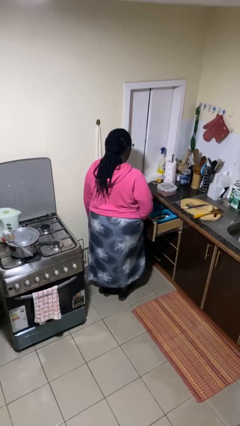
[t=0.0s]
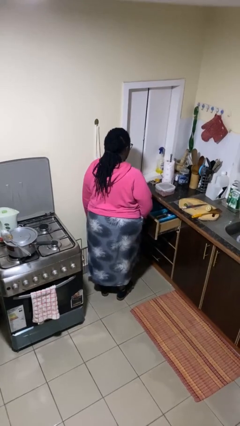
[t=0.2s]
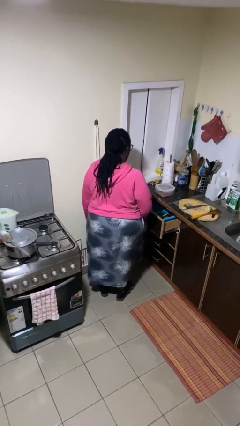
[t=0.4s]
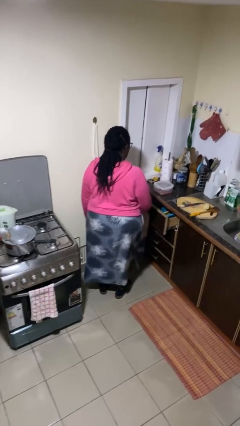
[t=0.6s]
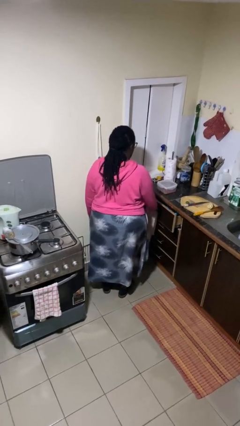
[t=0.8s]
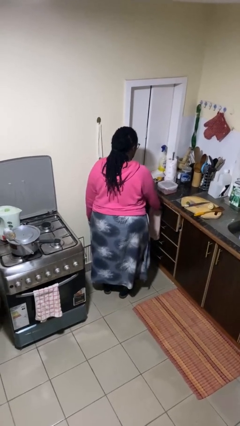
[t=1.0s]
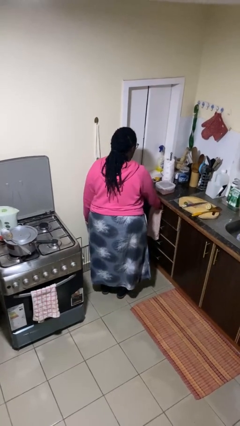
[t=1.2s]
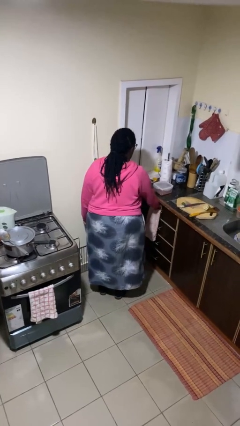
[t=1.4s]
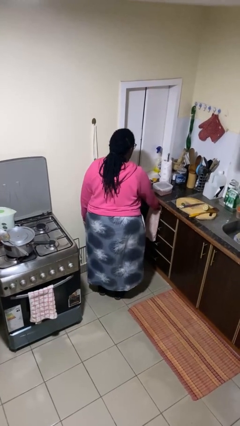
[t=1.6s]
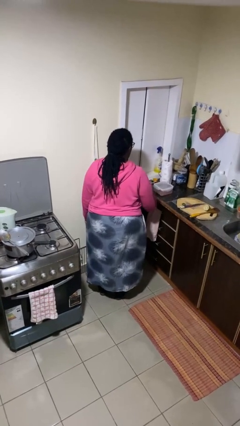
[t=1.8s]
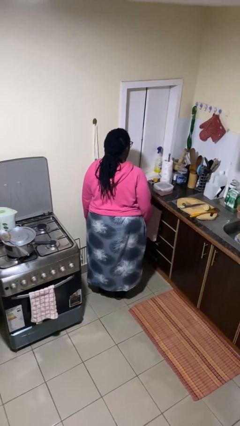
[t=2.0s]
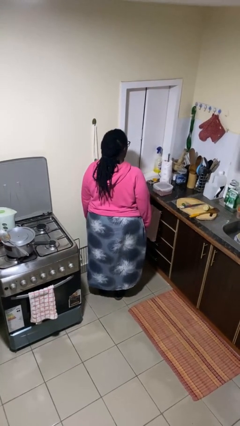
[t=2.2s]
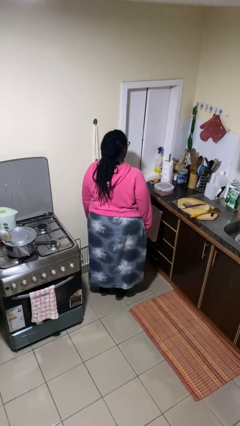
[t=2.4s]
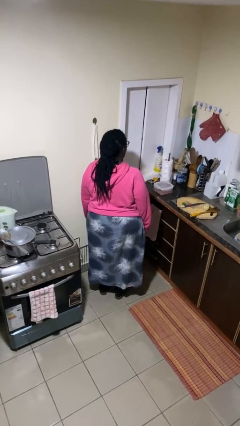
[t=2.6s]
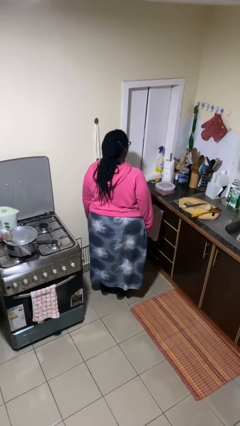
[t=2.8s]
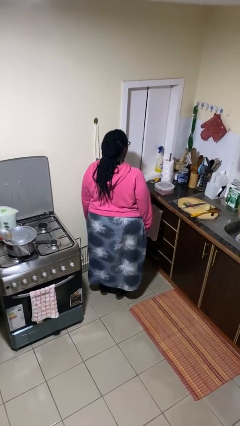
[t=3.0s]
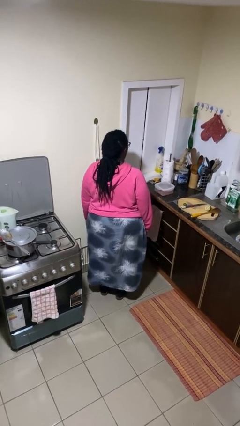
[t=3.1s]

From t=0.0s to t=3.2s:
person closes kitchen drawer

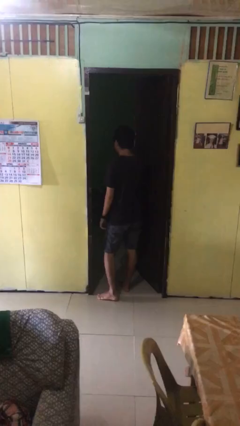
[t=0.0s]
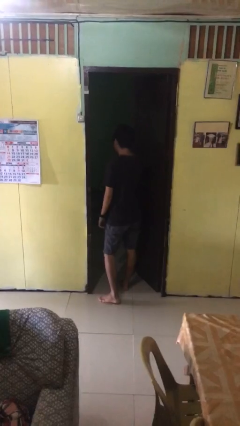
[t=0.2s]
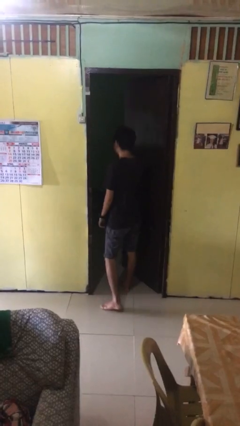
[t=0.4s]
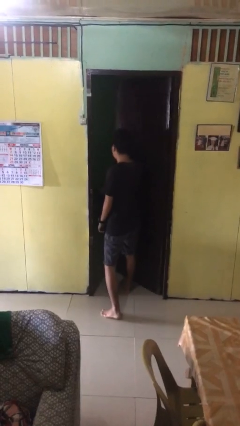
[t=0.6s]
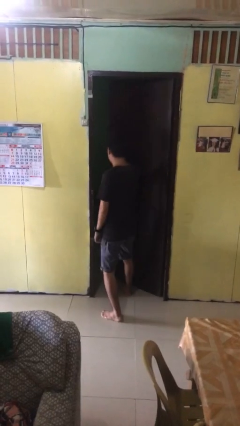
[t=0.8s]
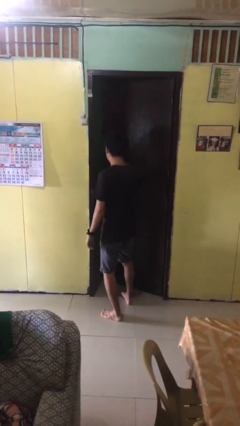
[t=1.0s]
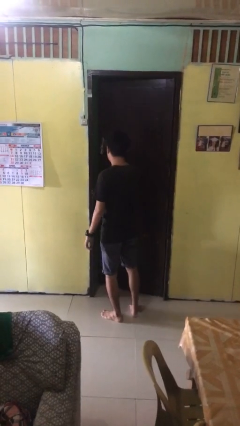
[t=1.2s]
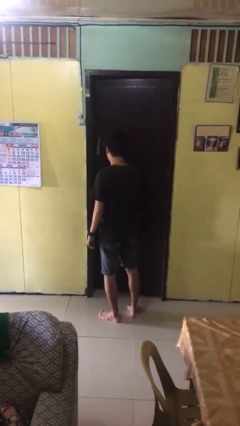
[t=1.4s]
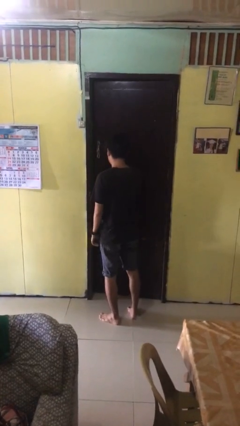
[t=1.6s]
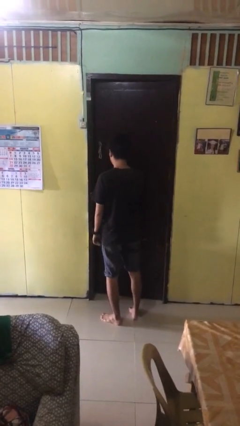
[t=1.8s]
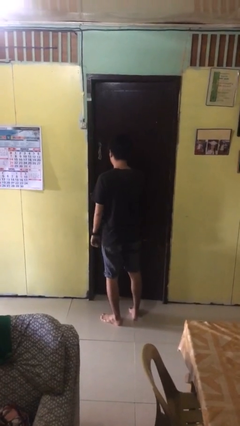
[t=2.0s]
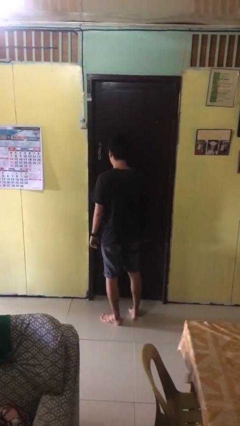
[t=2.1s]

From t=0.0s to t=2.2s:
person closes facility door

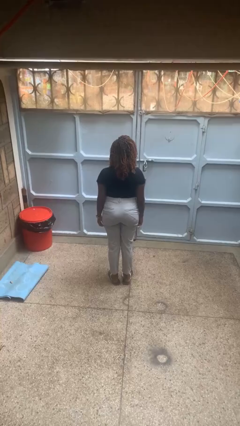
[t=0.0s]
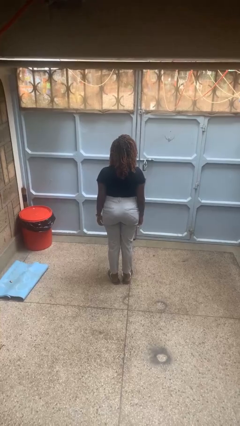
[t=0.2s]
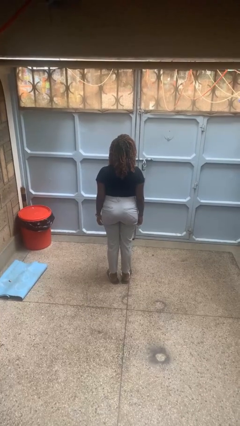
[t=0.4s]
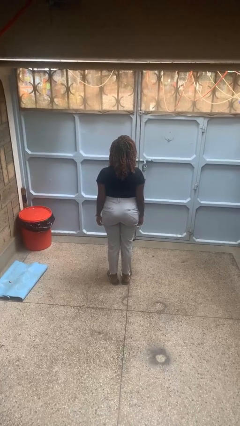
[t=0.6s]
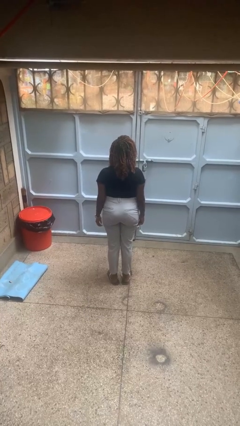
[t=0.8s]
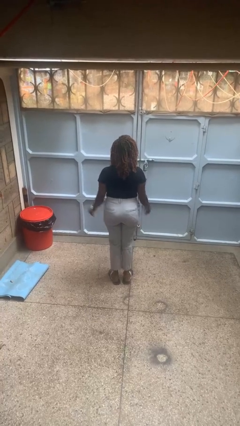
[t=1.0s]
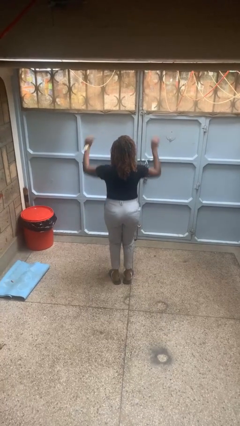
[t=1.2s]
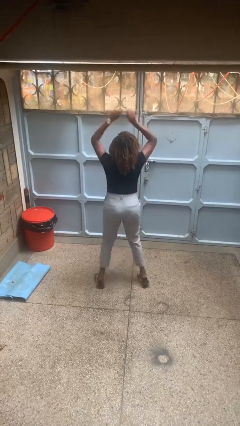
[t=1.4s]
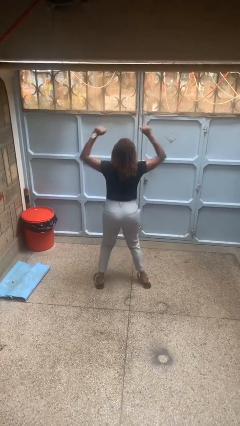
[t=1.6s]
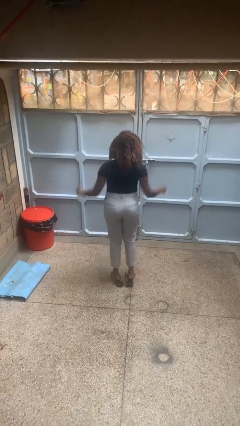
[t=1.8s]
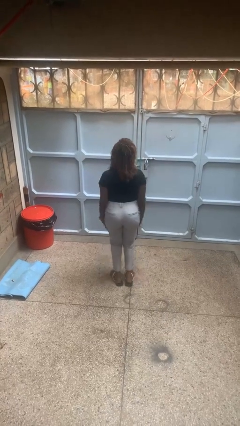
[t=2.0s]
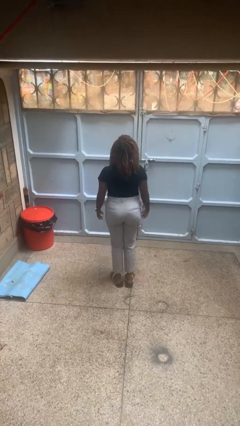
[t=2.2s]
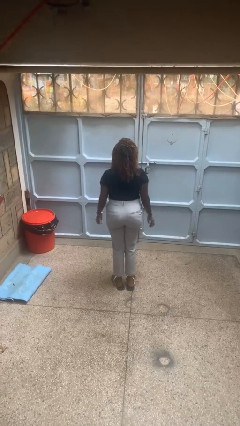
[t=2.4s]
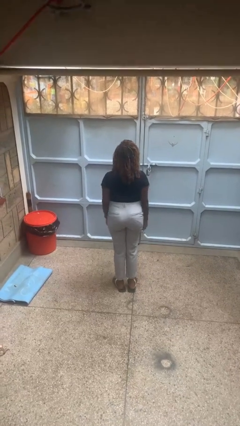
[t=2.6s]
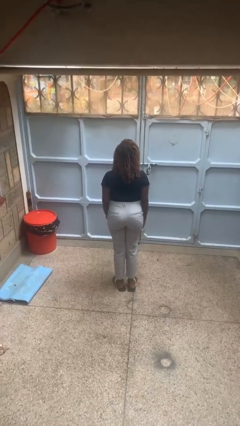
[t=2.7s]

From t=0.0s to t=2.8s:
person exercises with jumping jacks

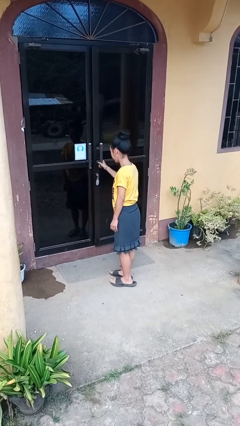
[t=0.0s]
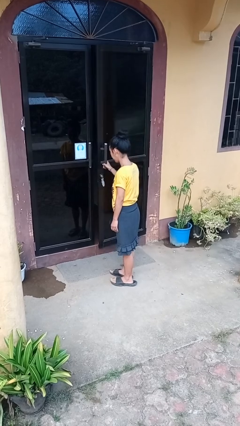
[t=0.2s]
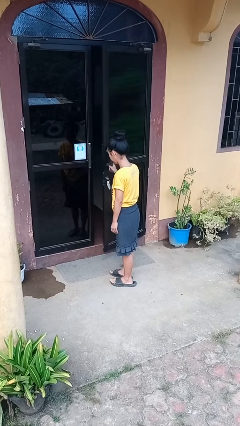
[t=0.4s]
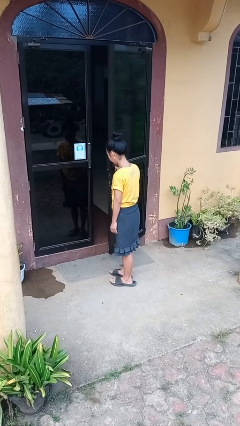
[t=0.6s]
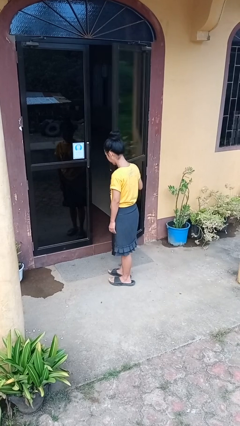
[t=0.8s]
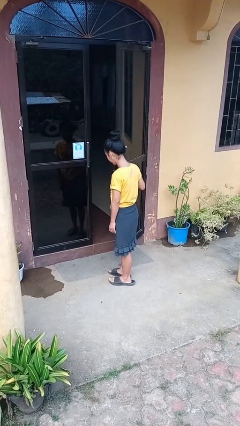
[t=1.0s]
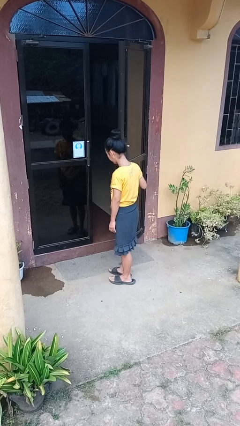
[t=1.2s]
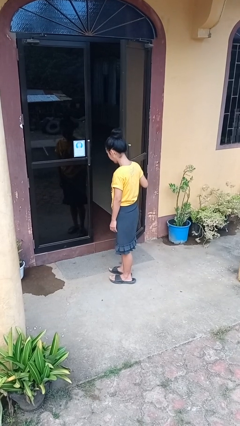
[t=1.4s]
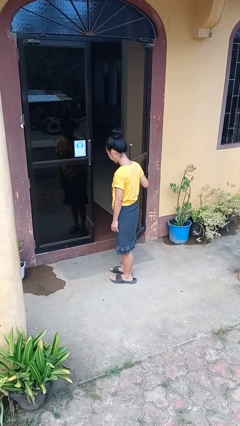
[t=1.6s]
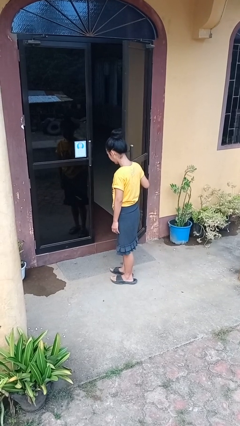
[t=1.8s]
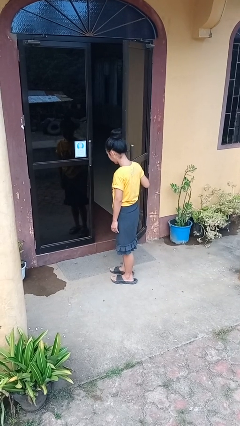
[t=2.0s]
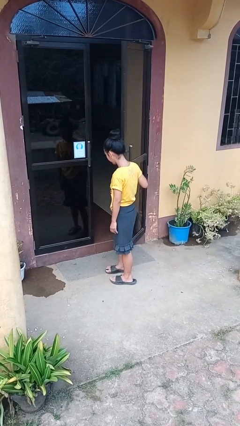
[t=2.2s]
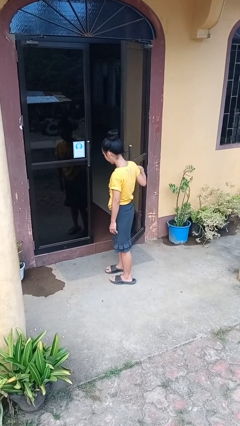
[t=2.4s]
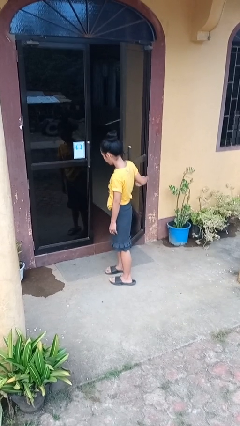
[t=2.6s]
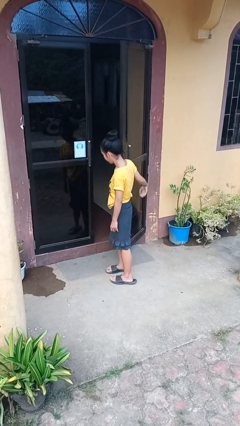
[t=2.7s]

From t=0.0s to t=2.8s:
person opens facility door

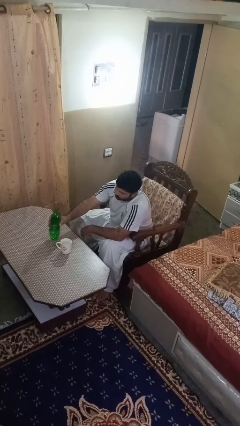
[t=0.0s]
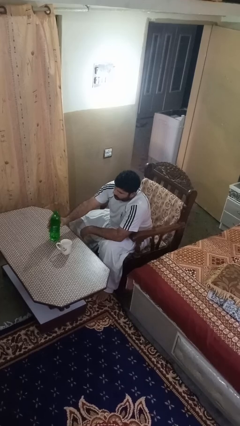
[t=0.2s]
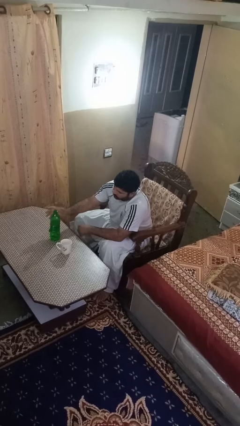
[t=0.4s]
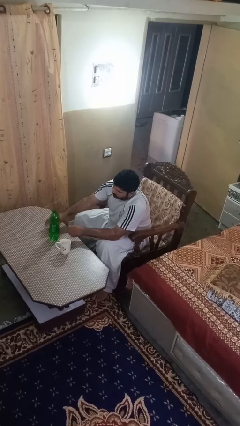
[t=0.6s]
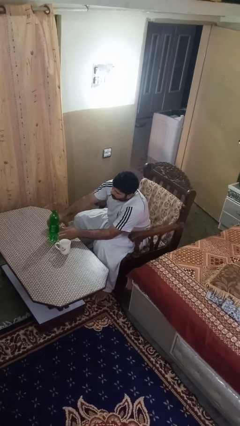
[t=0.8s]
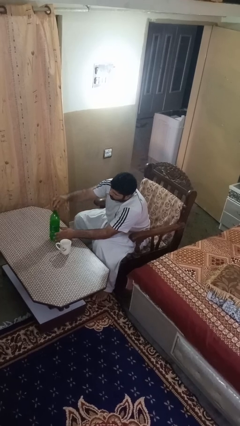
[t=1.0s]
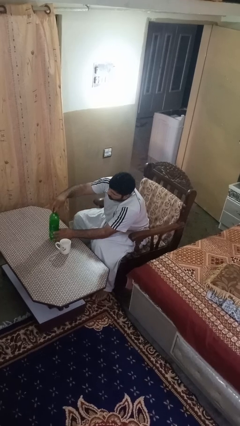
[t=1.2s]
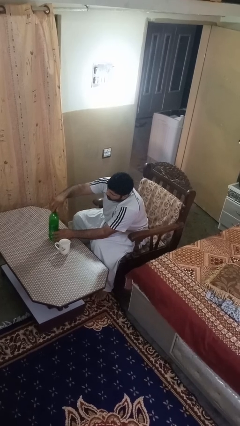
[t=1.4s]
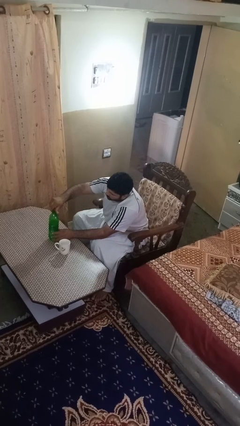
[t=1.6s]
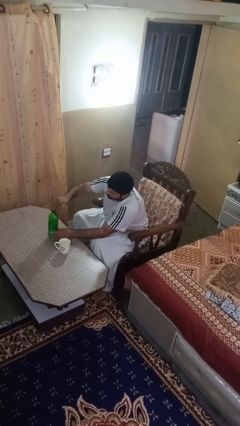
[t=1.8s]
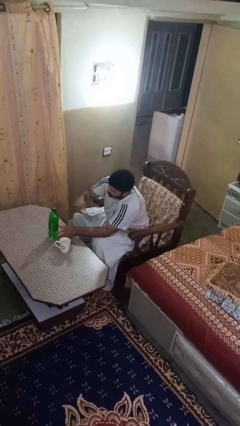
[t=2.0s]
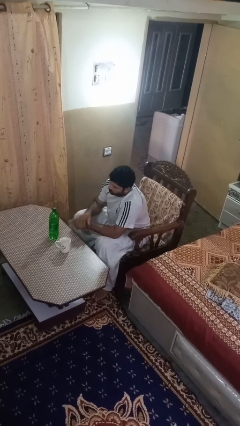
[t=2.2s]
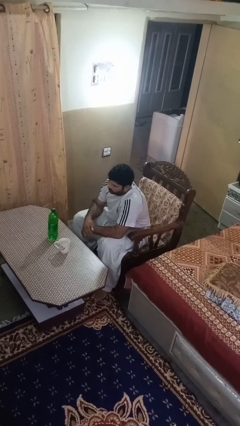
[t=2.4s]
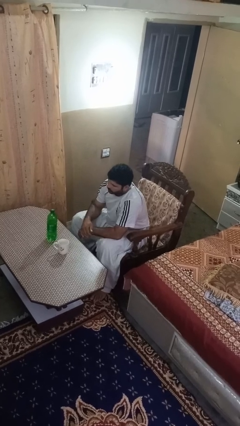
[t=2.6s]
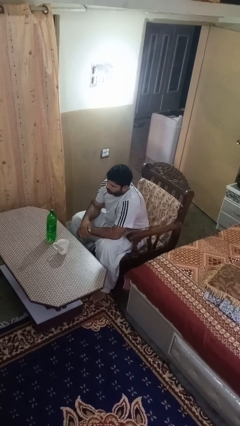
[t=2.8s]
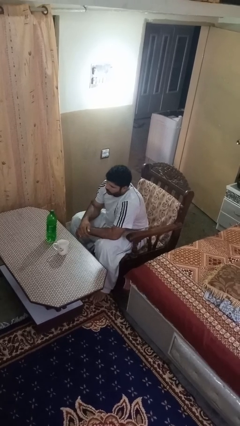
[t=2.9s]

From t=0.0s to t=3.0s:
person screws lid to bottle

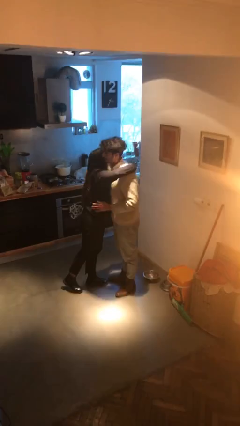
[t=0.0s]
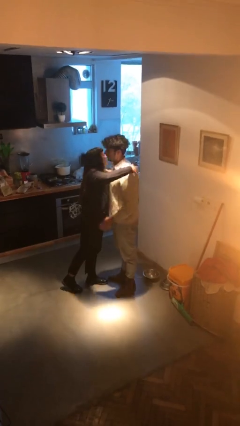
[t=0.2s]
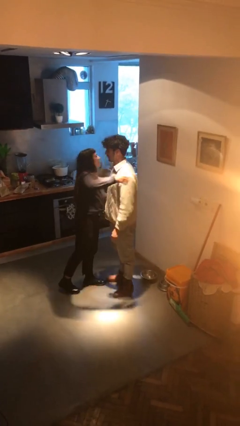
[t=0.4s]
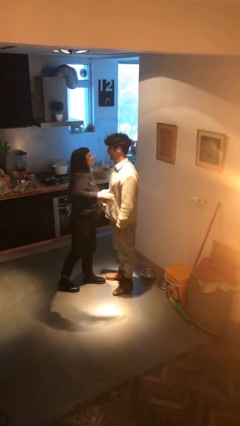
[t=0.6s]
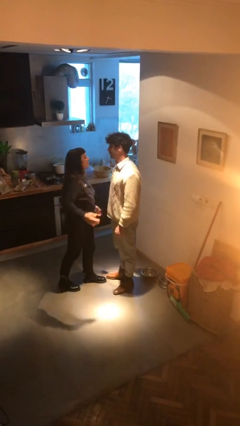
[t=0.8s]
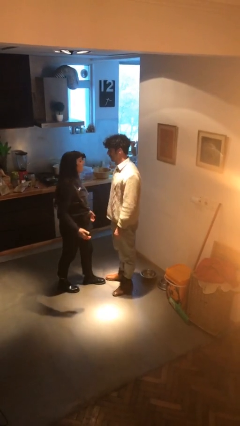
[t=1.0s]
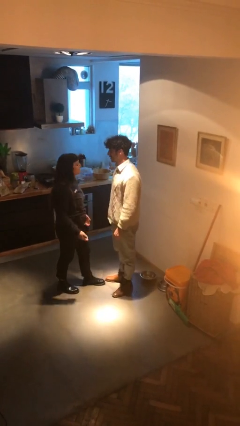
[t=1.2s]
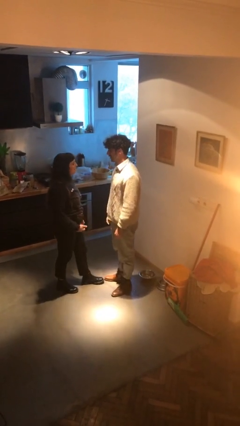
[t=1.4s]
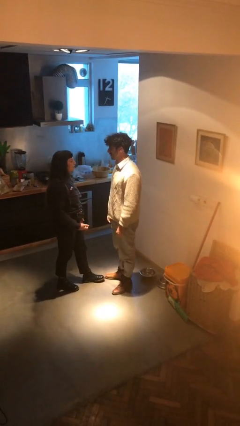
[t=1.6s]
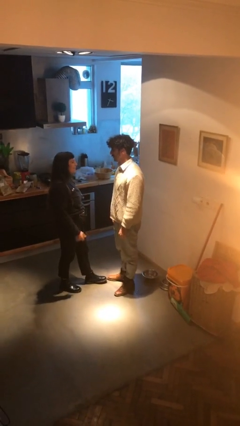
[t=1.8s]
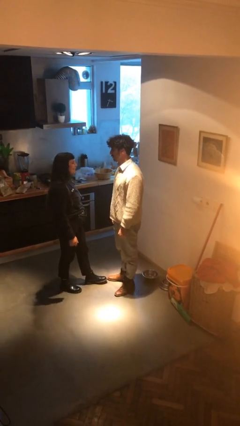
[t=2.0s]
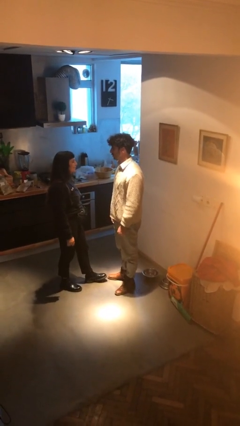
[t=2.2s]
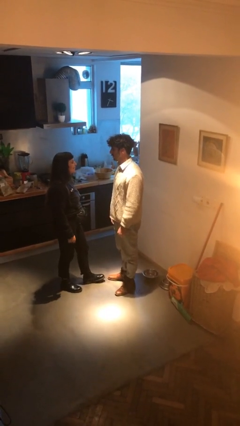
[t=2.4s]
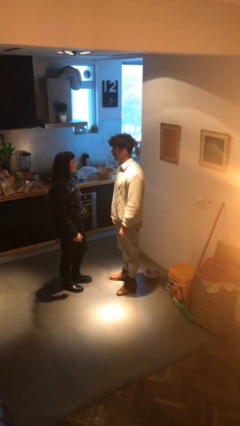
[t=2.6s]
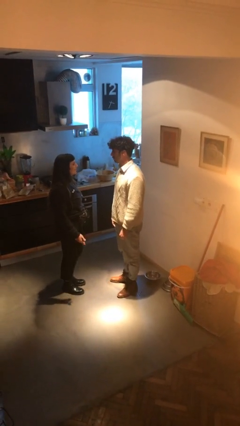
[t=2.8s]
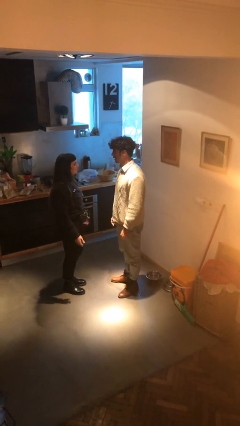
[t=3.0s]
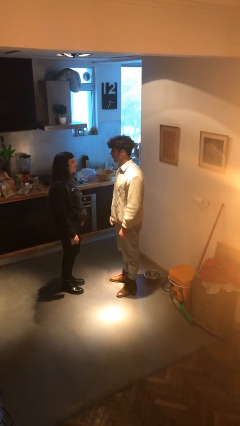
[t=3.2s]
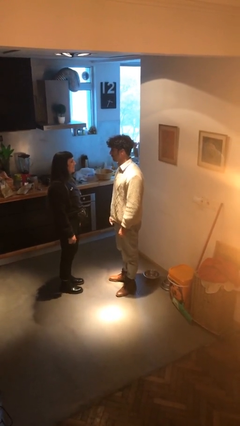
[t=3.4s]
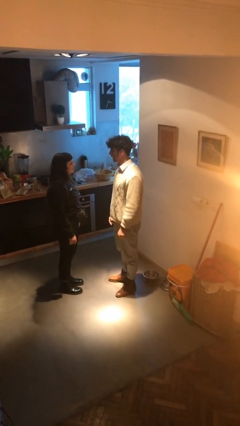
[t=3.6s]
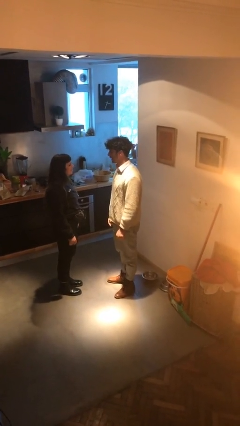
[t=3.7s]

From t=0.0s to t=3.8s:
person talks to person
